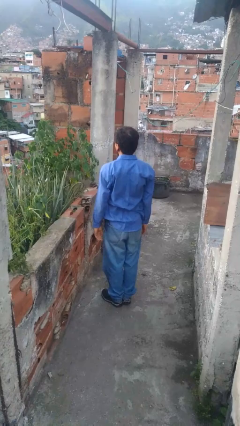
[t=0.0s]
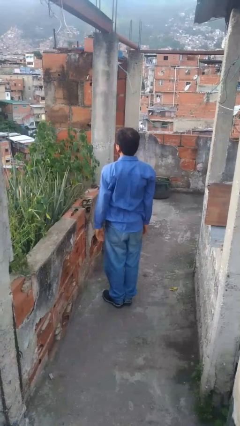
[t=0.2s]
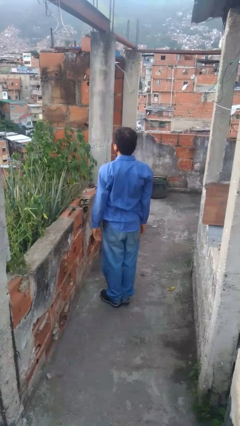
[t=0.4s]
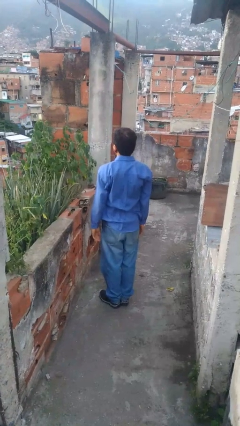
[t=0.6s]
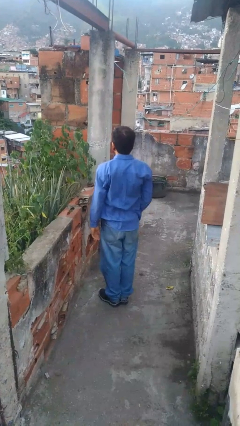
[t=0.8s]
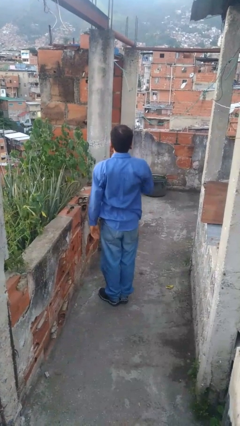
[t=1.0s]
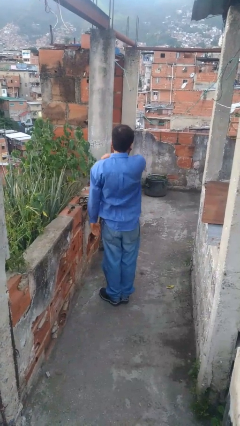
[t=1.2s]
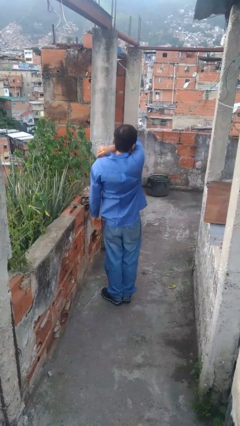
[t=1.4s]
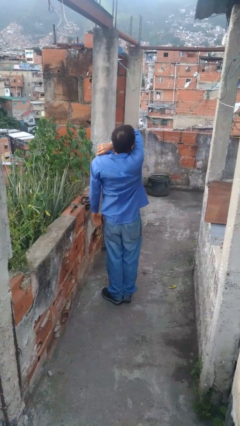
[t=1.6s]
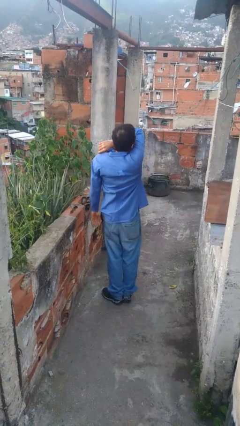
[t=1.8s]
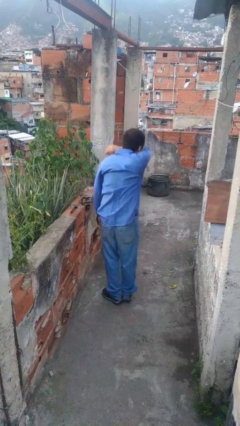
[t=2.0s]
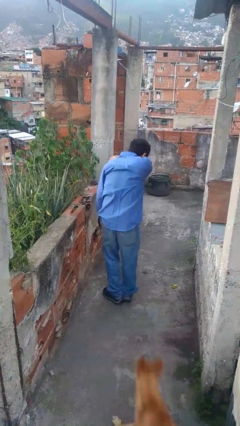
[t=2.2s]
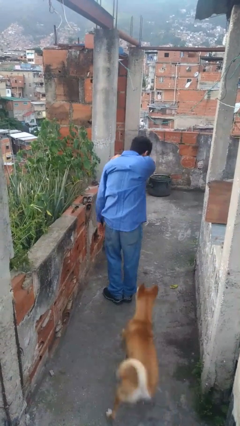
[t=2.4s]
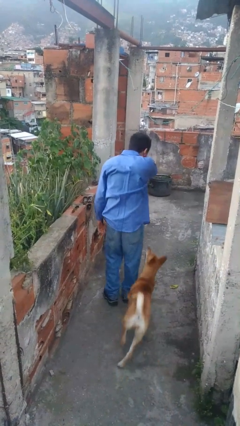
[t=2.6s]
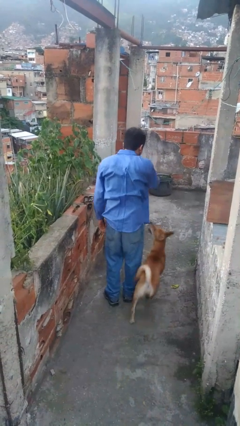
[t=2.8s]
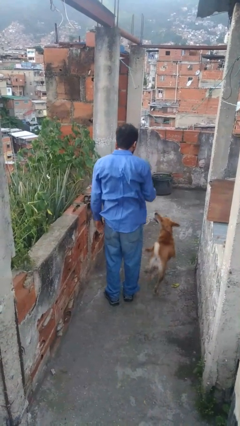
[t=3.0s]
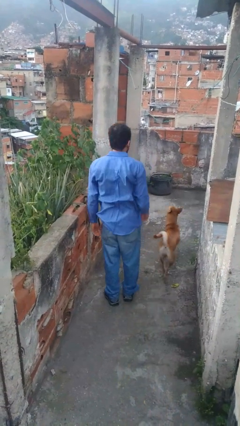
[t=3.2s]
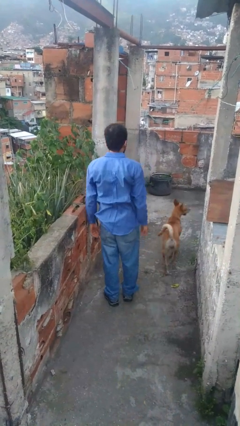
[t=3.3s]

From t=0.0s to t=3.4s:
person sneezes into arm

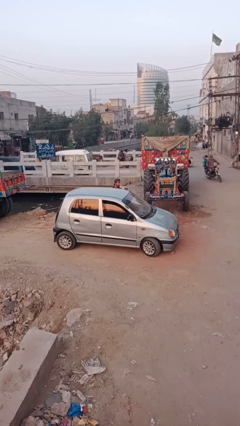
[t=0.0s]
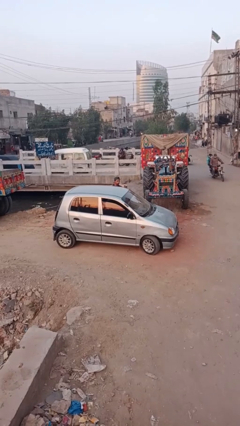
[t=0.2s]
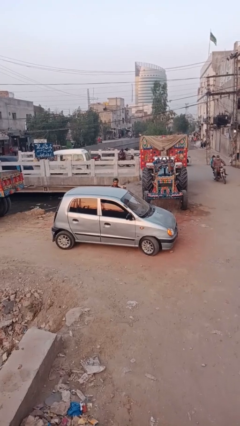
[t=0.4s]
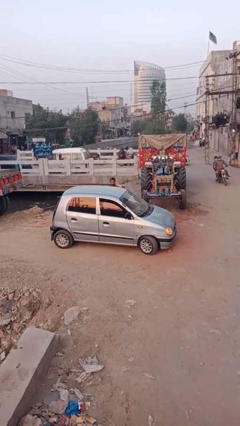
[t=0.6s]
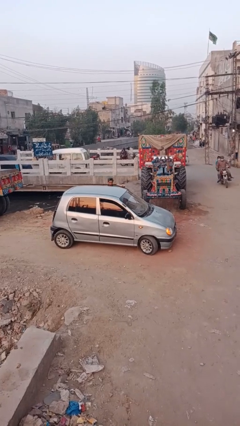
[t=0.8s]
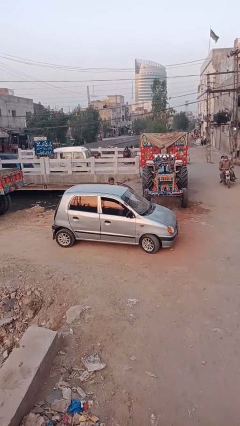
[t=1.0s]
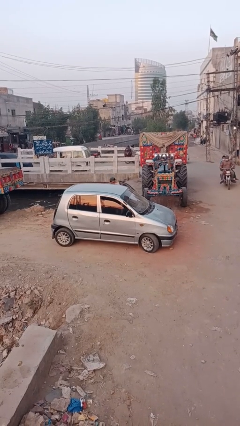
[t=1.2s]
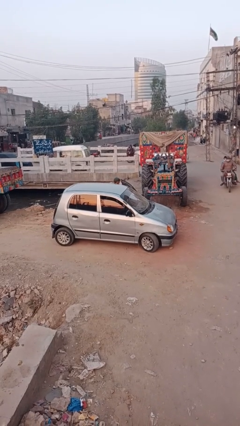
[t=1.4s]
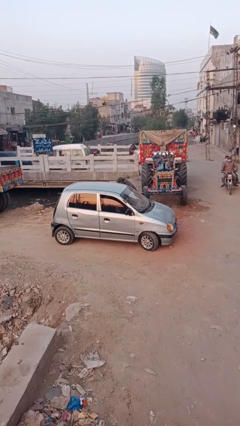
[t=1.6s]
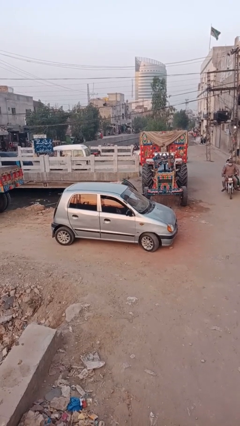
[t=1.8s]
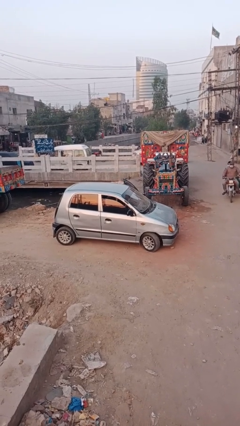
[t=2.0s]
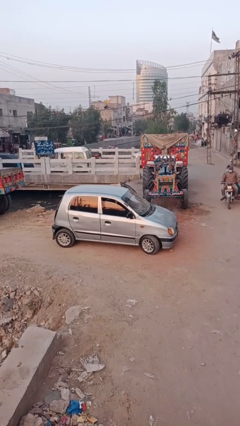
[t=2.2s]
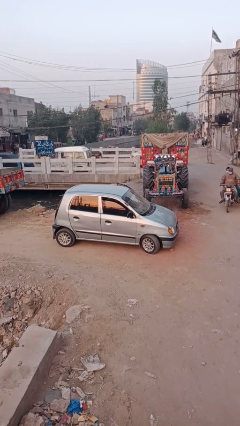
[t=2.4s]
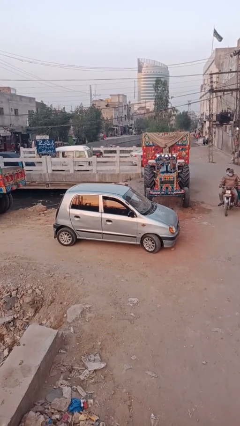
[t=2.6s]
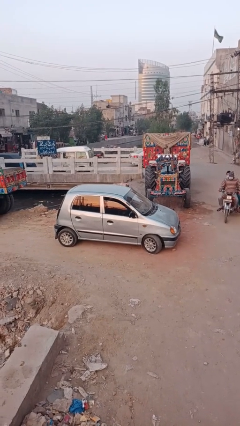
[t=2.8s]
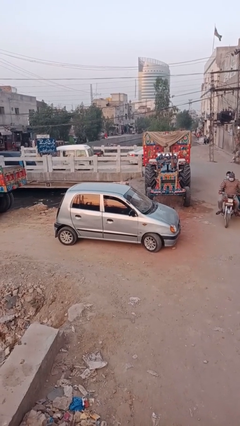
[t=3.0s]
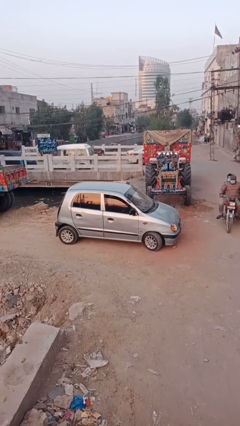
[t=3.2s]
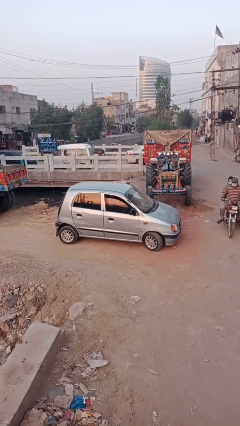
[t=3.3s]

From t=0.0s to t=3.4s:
car picks up person

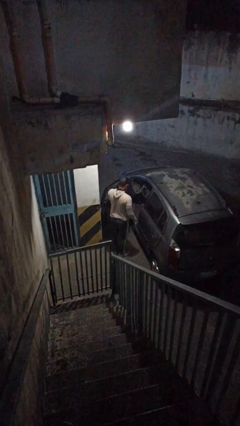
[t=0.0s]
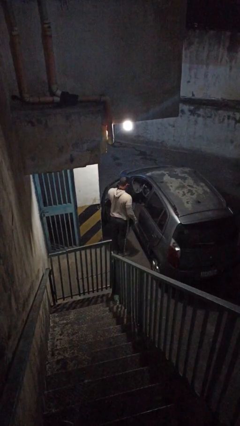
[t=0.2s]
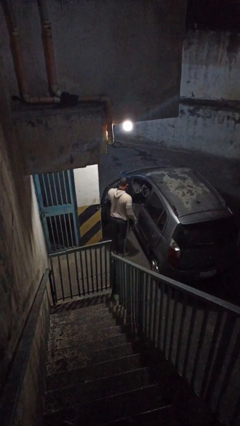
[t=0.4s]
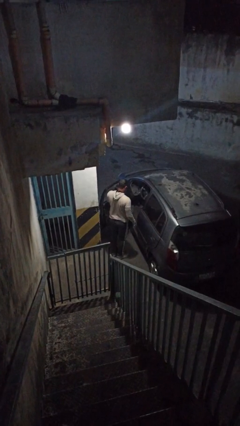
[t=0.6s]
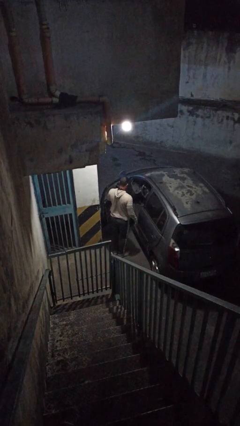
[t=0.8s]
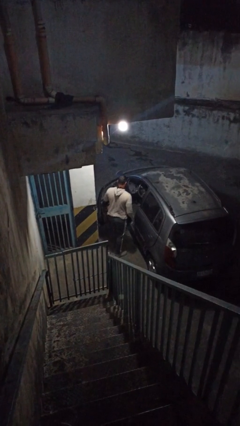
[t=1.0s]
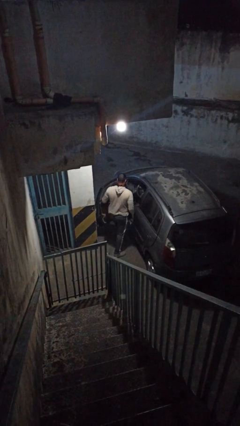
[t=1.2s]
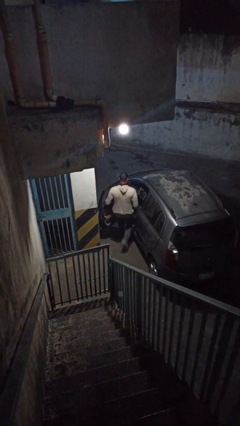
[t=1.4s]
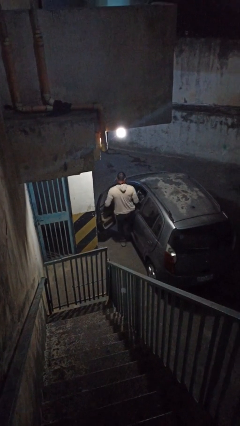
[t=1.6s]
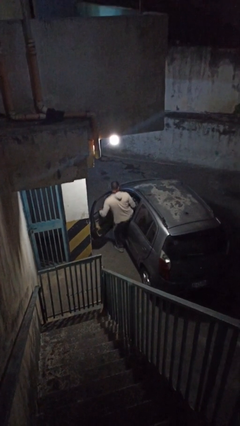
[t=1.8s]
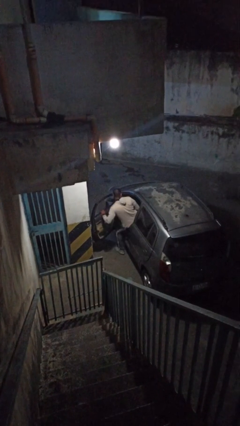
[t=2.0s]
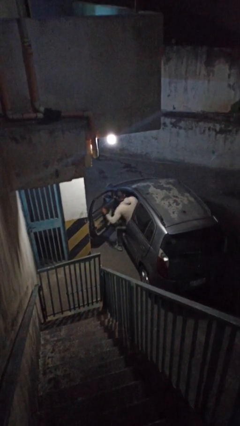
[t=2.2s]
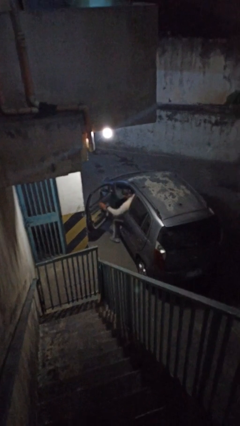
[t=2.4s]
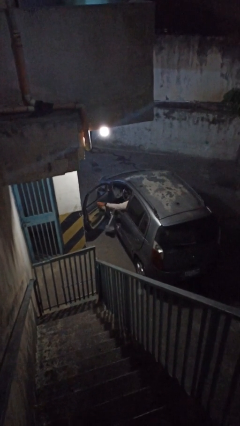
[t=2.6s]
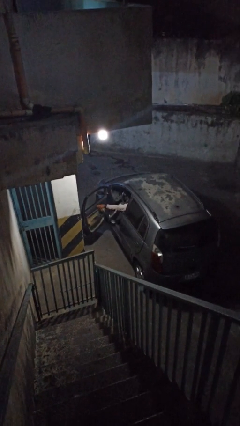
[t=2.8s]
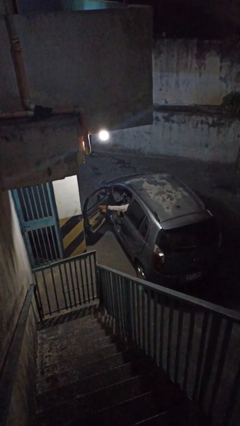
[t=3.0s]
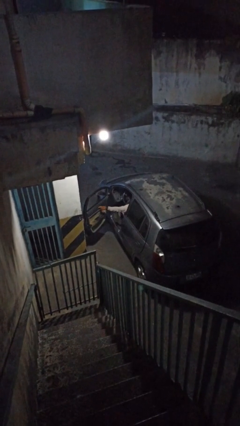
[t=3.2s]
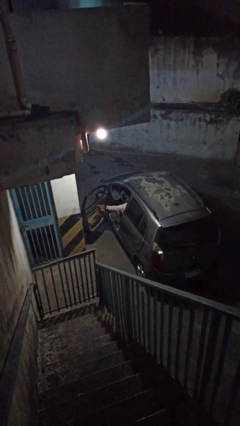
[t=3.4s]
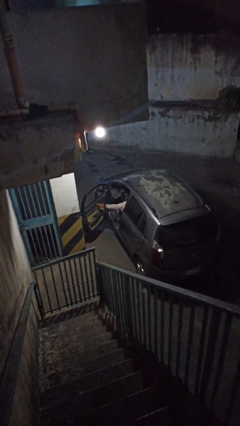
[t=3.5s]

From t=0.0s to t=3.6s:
person enters car

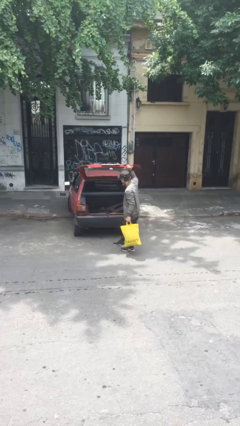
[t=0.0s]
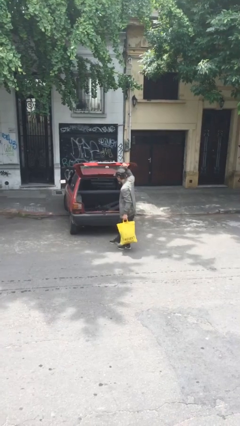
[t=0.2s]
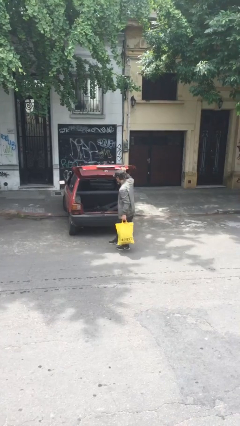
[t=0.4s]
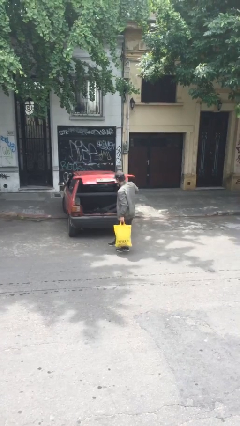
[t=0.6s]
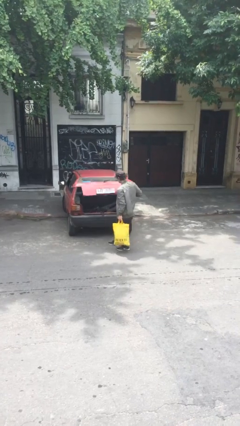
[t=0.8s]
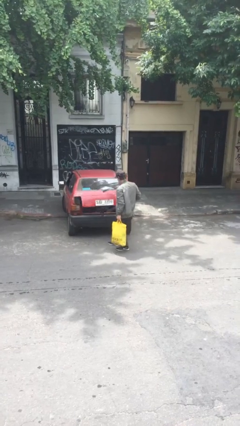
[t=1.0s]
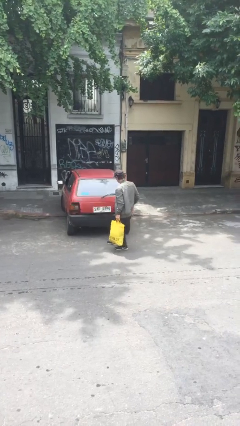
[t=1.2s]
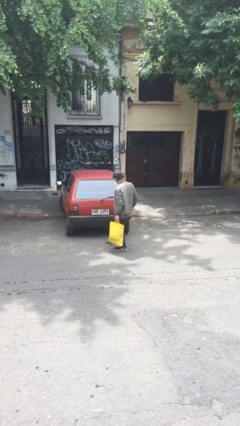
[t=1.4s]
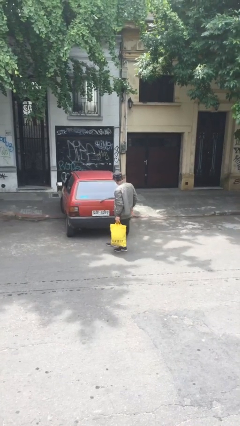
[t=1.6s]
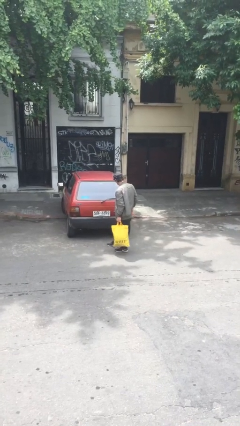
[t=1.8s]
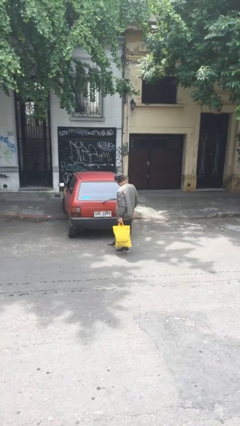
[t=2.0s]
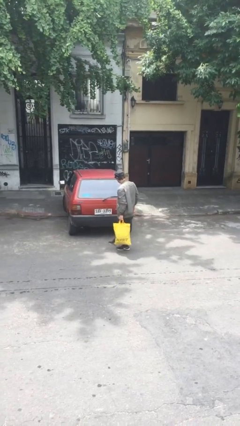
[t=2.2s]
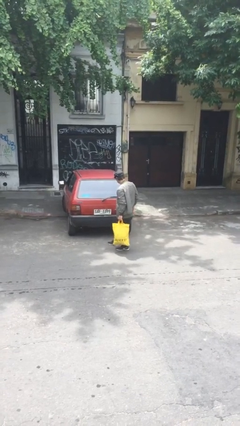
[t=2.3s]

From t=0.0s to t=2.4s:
person closes car trunk

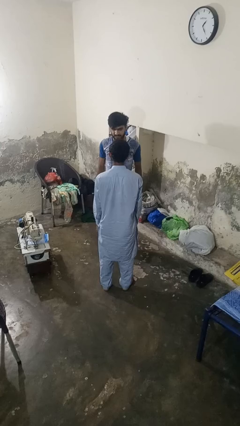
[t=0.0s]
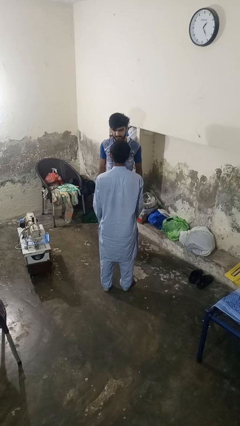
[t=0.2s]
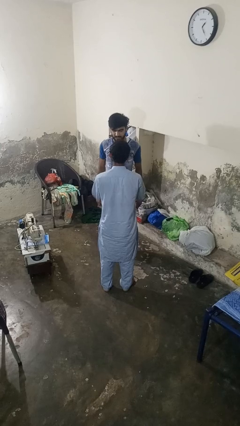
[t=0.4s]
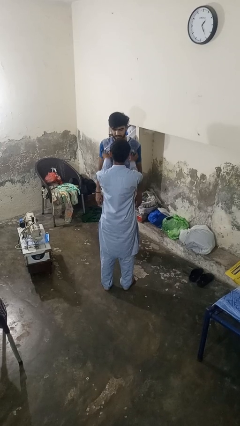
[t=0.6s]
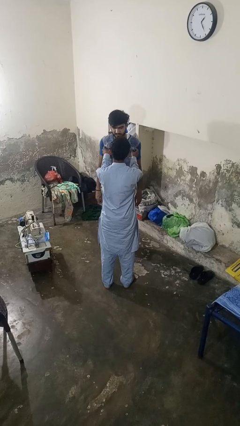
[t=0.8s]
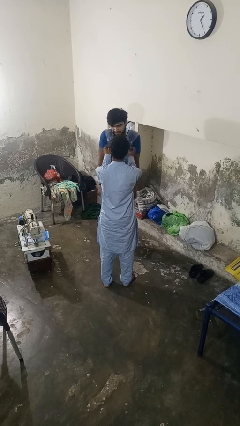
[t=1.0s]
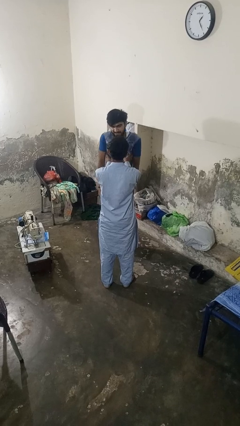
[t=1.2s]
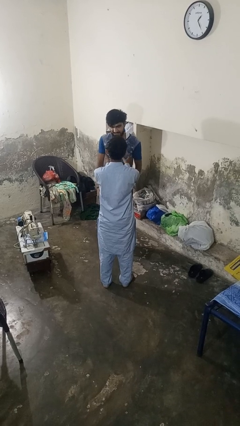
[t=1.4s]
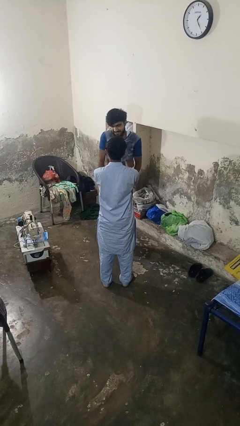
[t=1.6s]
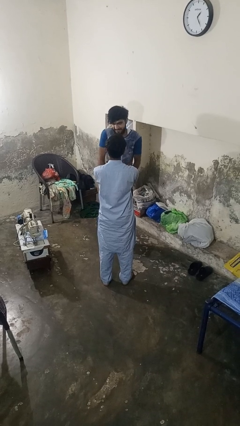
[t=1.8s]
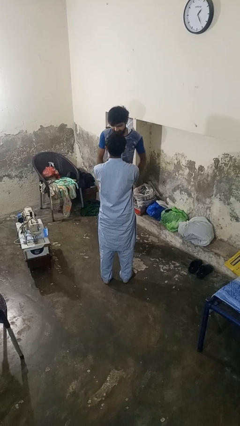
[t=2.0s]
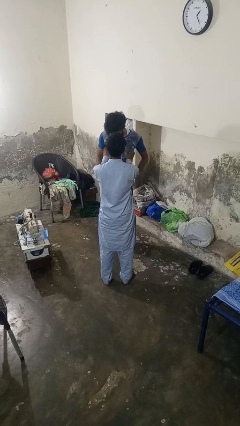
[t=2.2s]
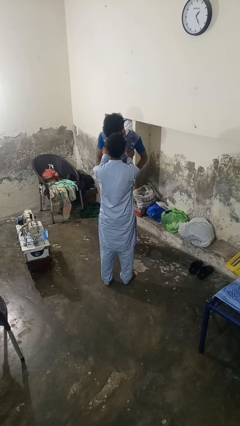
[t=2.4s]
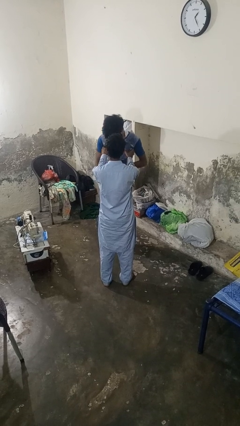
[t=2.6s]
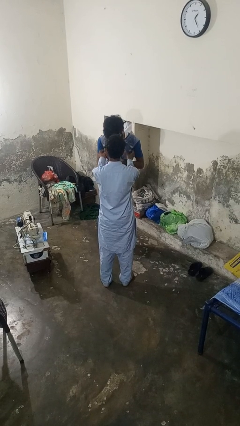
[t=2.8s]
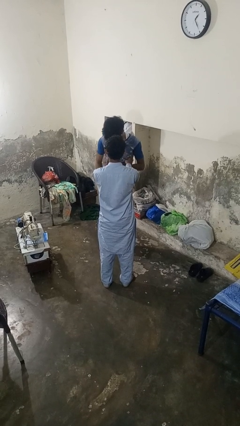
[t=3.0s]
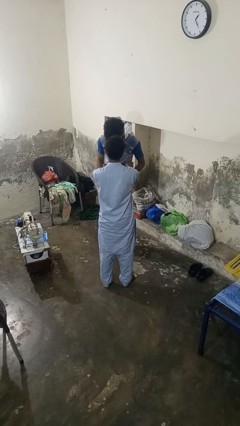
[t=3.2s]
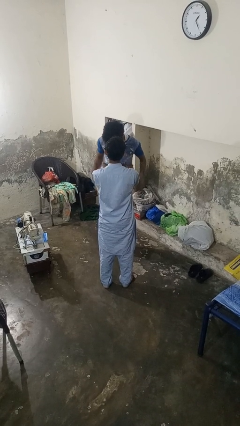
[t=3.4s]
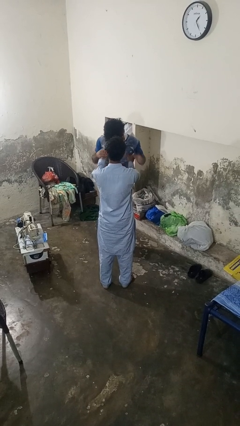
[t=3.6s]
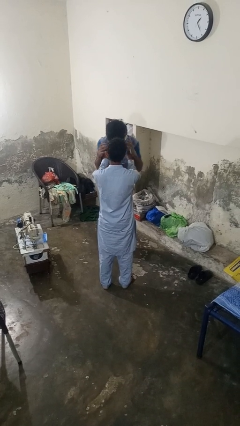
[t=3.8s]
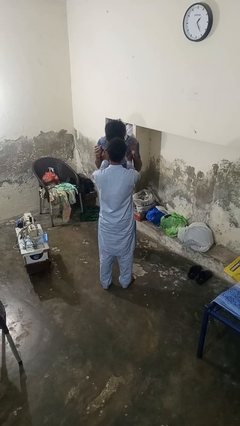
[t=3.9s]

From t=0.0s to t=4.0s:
person tickles person

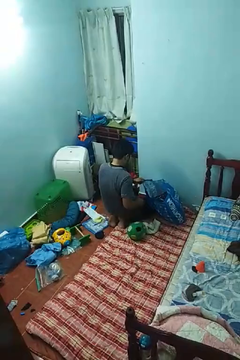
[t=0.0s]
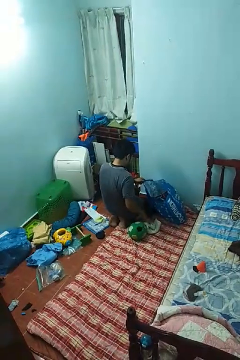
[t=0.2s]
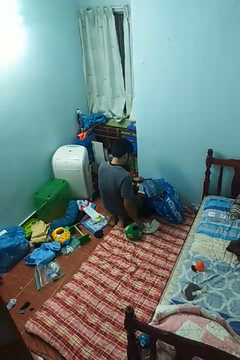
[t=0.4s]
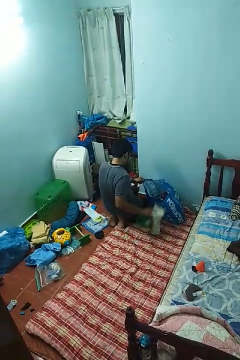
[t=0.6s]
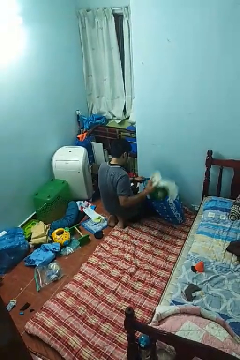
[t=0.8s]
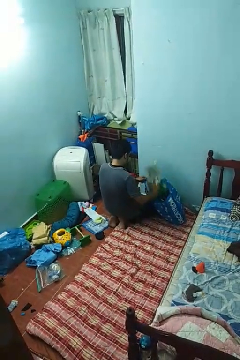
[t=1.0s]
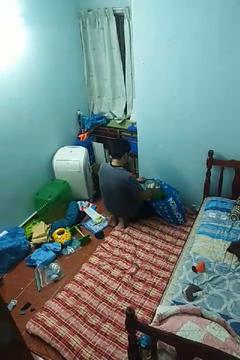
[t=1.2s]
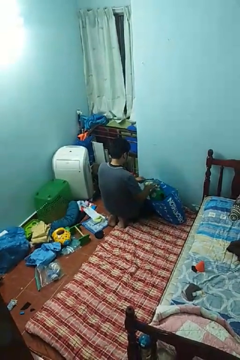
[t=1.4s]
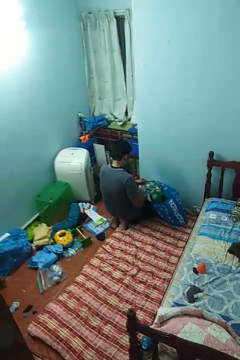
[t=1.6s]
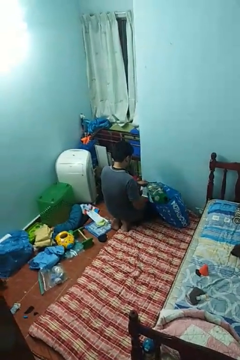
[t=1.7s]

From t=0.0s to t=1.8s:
person puts object into bag
